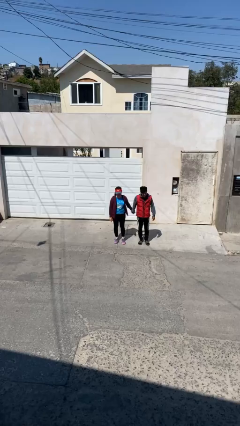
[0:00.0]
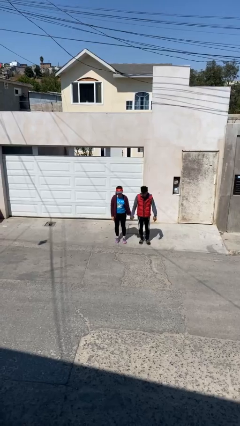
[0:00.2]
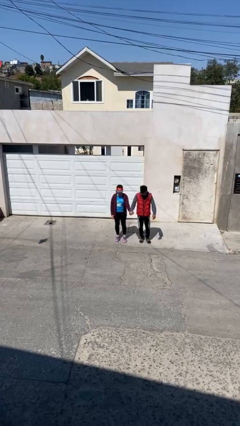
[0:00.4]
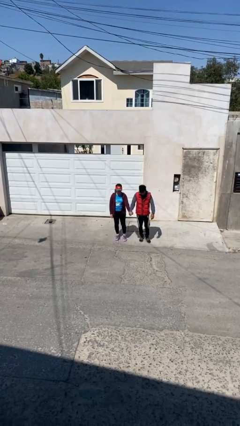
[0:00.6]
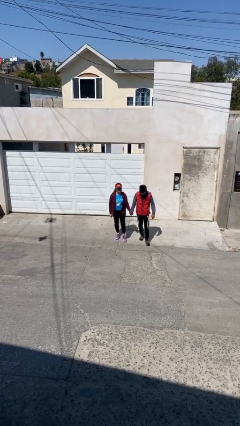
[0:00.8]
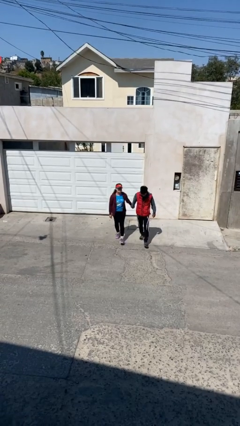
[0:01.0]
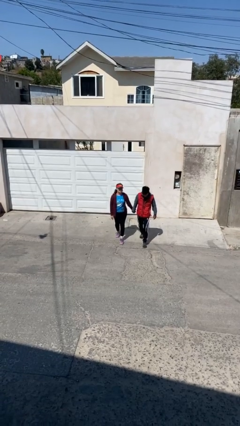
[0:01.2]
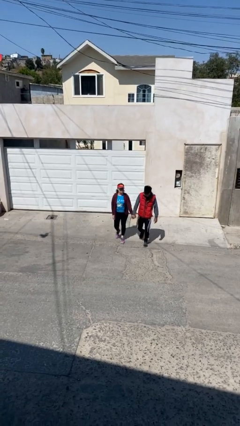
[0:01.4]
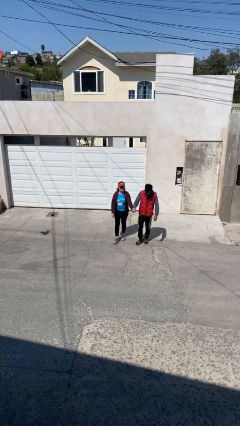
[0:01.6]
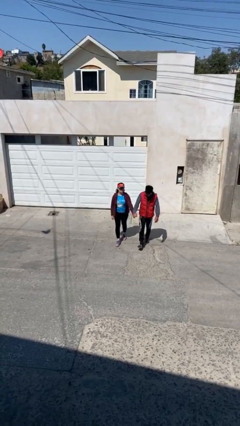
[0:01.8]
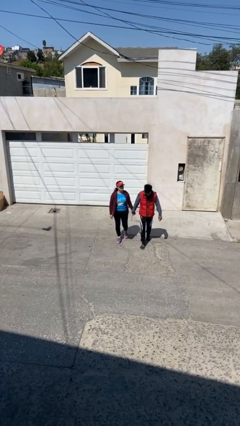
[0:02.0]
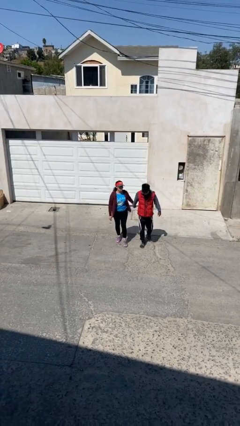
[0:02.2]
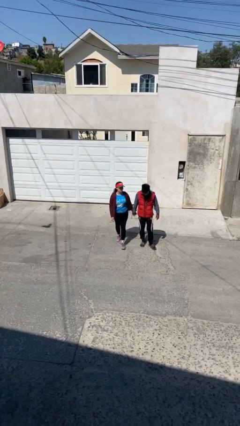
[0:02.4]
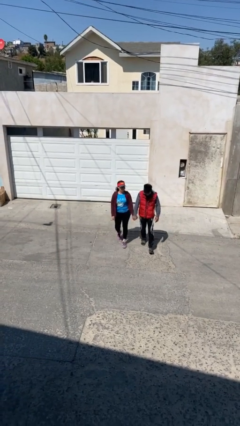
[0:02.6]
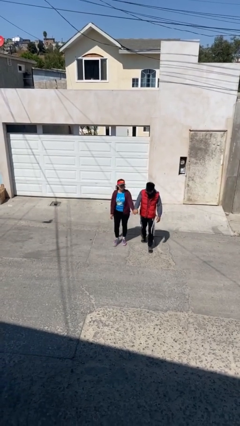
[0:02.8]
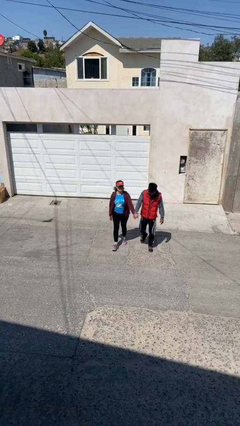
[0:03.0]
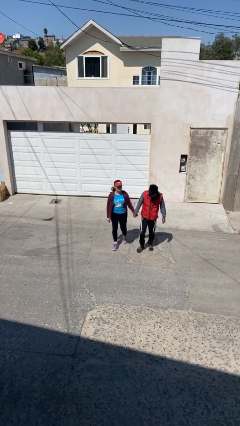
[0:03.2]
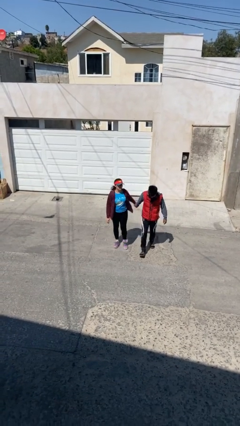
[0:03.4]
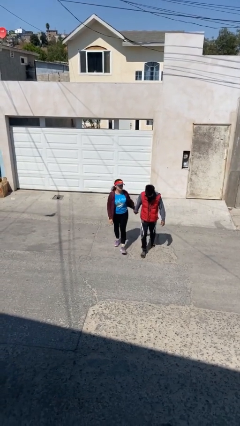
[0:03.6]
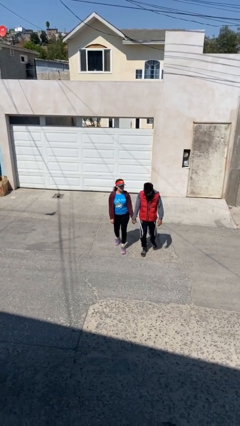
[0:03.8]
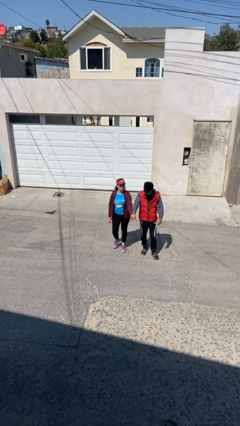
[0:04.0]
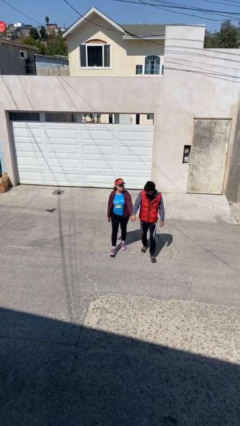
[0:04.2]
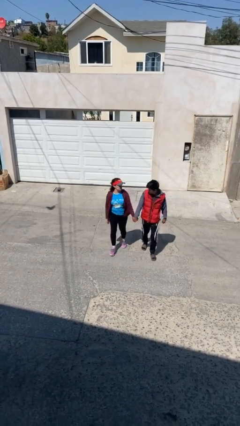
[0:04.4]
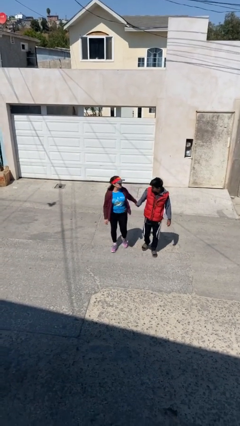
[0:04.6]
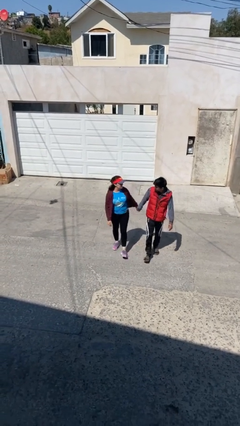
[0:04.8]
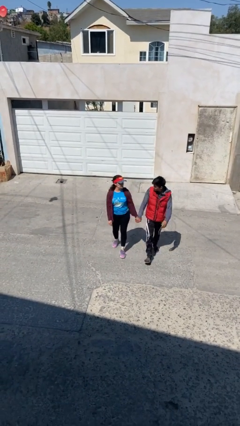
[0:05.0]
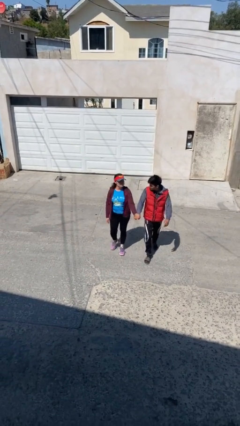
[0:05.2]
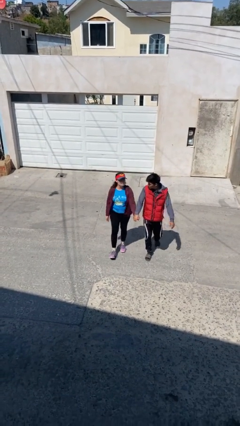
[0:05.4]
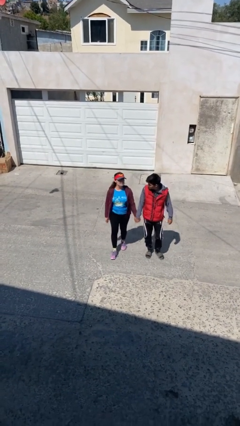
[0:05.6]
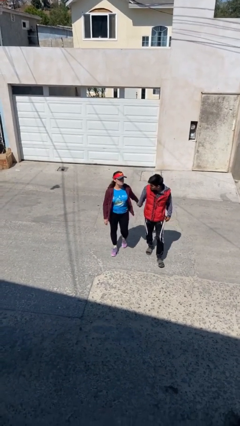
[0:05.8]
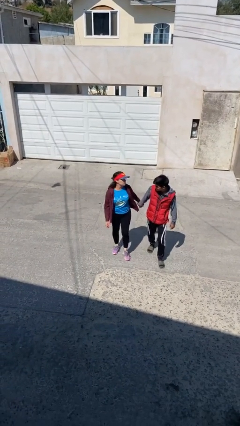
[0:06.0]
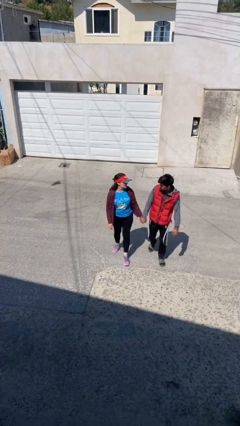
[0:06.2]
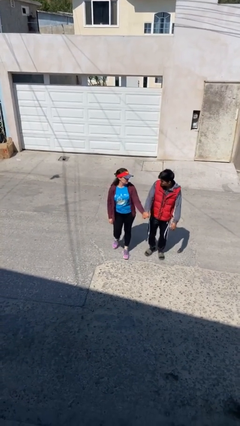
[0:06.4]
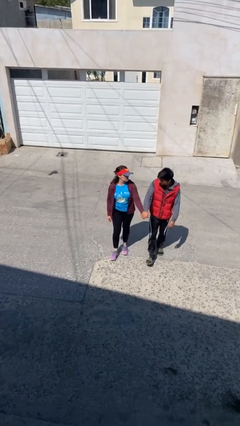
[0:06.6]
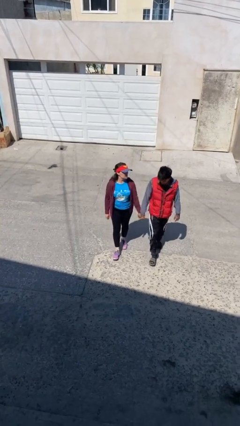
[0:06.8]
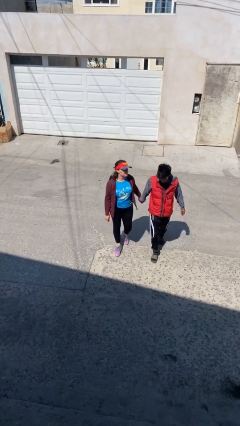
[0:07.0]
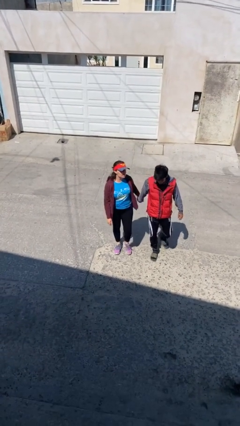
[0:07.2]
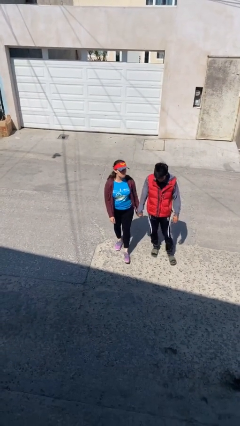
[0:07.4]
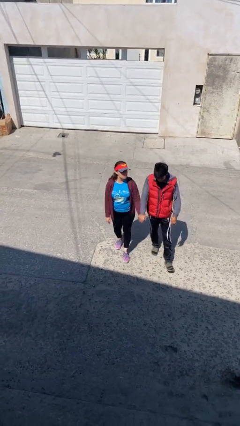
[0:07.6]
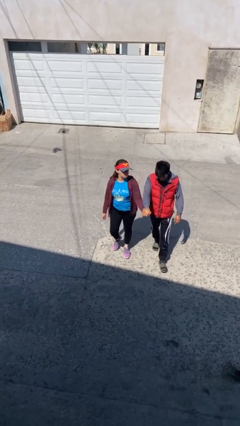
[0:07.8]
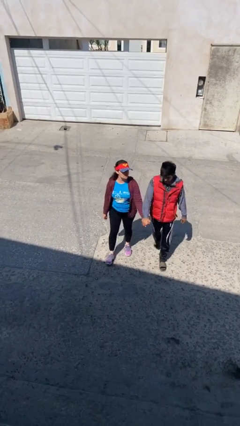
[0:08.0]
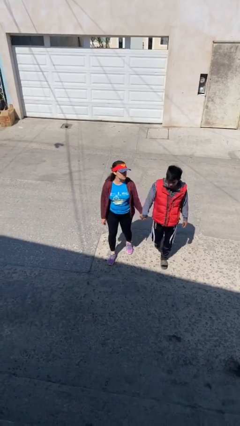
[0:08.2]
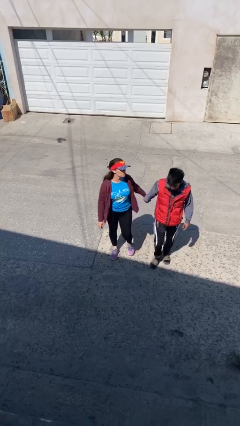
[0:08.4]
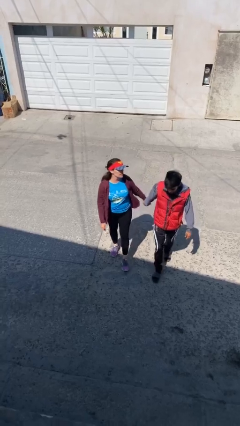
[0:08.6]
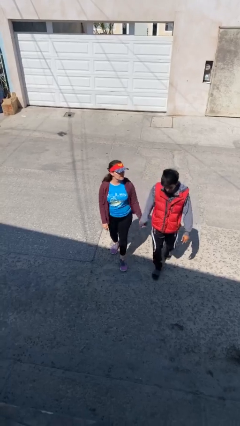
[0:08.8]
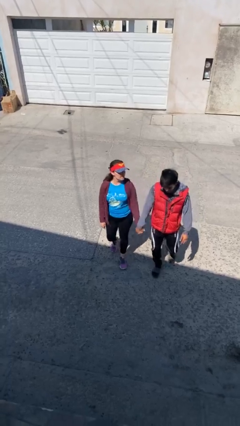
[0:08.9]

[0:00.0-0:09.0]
person holds hand

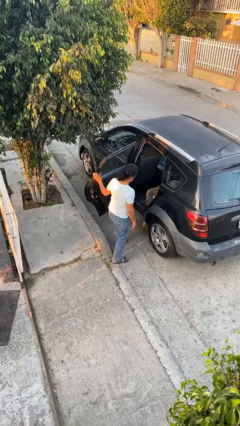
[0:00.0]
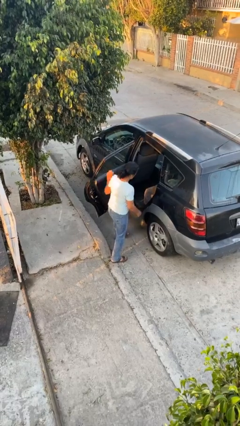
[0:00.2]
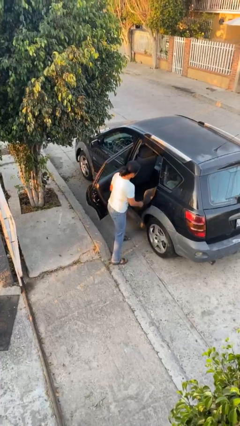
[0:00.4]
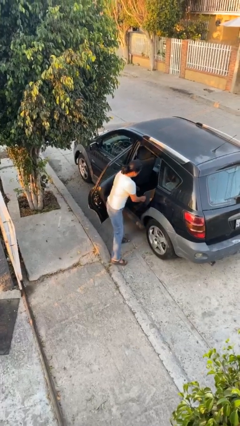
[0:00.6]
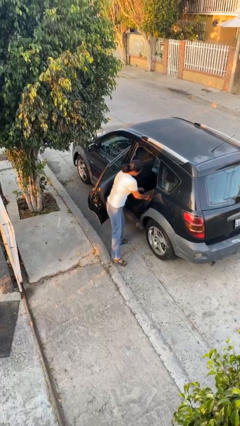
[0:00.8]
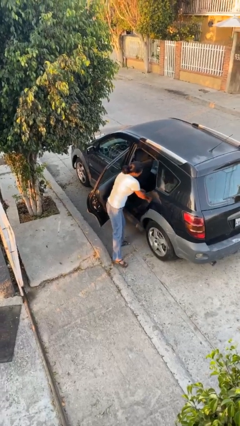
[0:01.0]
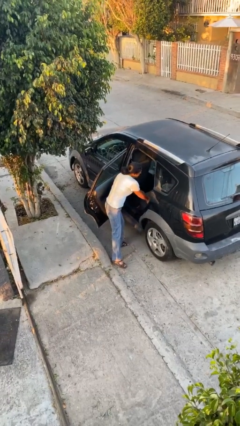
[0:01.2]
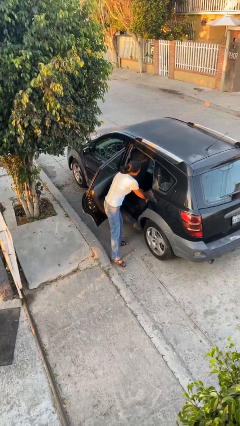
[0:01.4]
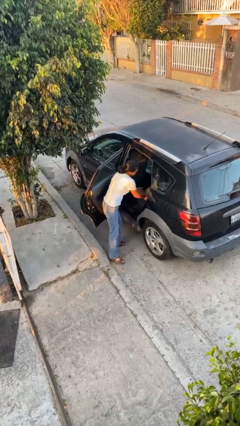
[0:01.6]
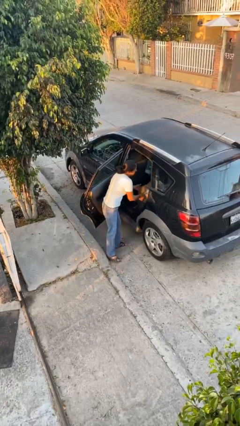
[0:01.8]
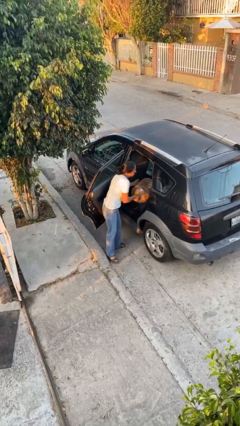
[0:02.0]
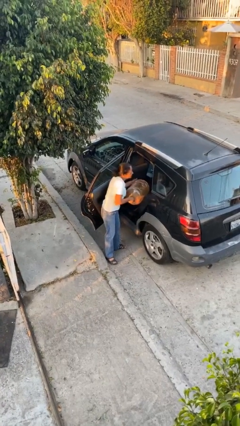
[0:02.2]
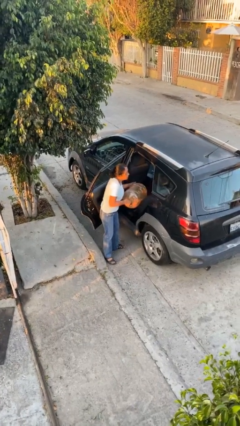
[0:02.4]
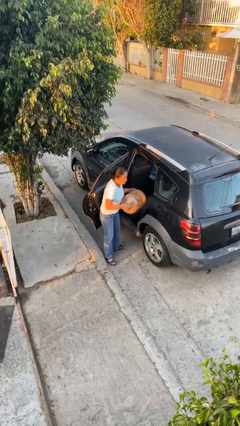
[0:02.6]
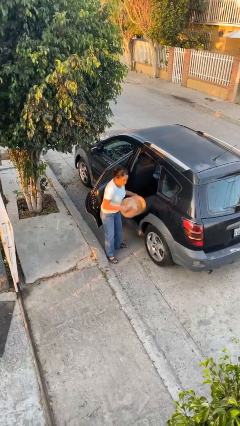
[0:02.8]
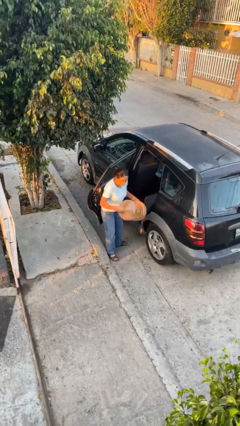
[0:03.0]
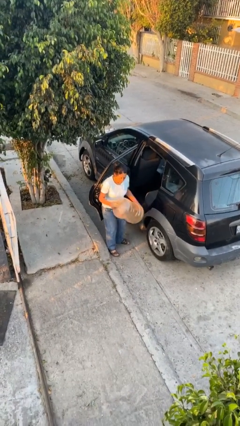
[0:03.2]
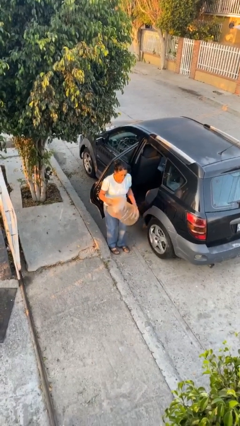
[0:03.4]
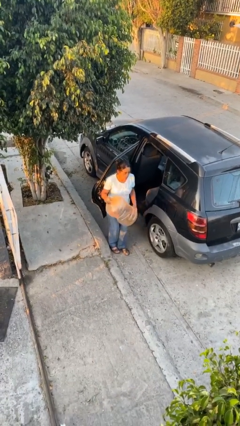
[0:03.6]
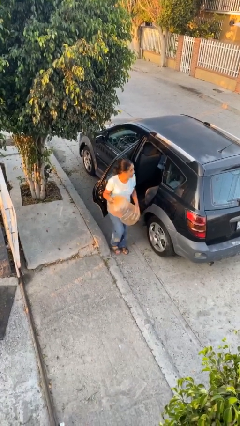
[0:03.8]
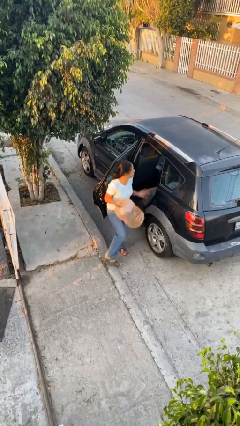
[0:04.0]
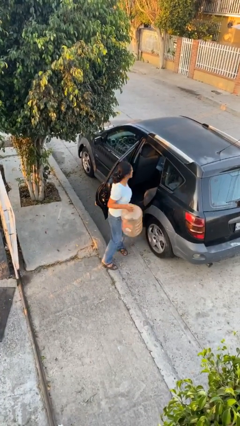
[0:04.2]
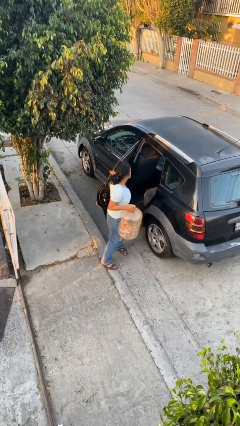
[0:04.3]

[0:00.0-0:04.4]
person unloads car

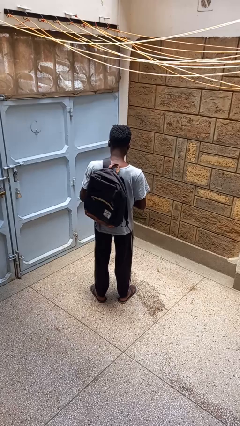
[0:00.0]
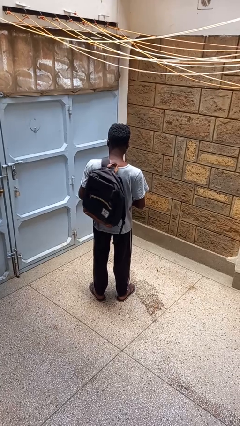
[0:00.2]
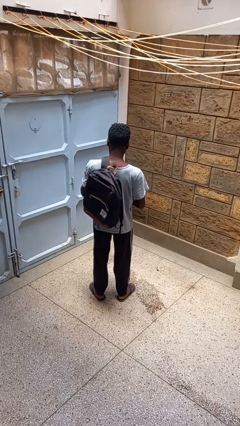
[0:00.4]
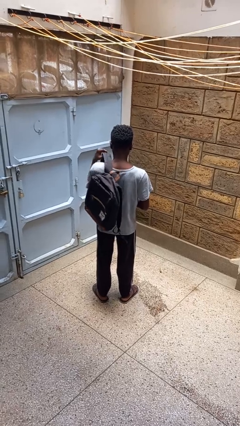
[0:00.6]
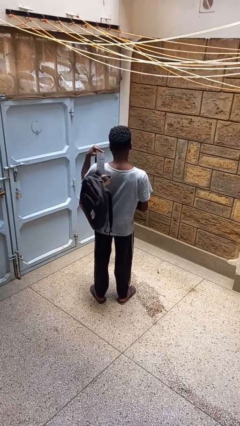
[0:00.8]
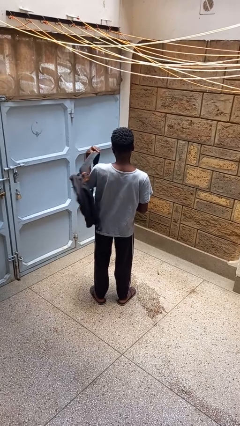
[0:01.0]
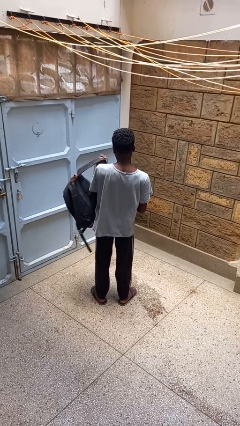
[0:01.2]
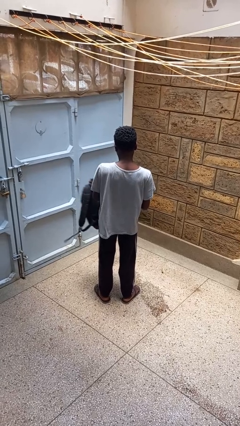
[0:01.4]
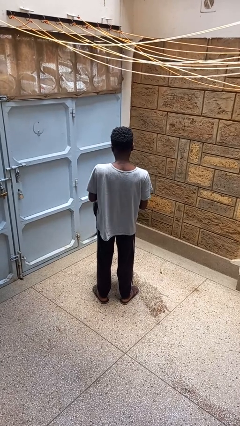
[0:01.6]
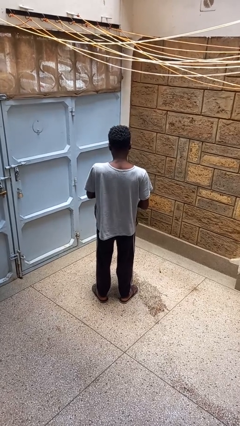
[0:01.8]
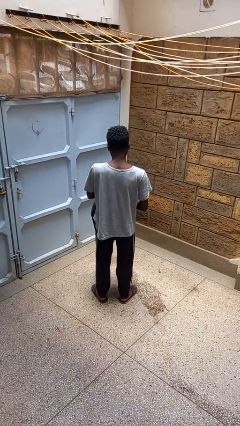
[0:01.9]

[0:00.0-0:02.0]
person takes off backpack

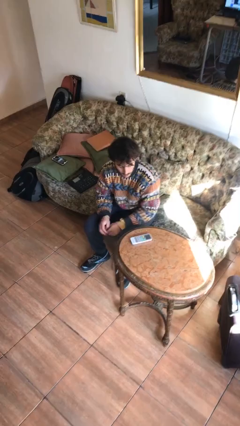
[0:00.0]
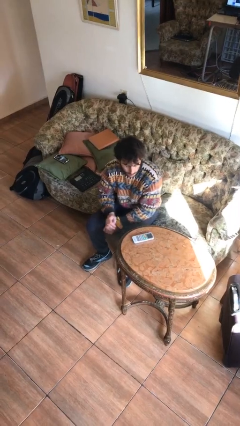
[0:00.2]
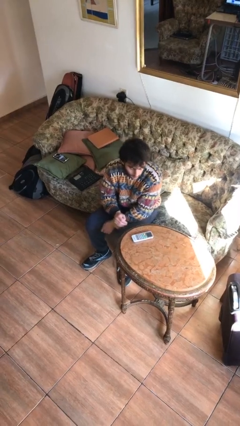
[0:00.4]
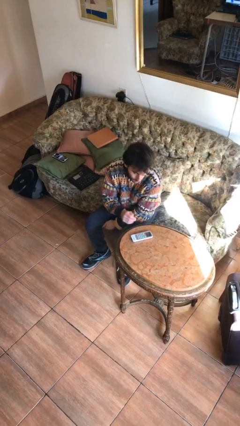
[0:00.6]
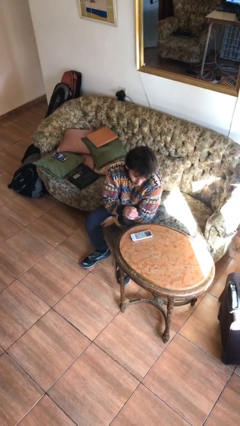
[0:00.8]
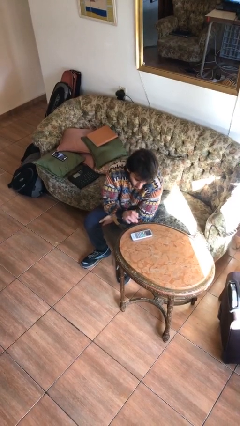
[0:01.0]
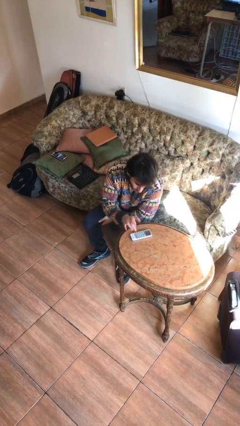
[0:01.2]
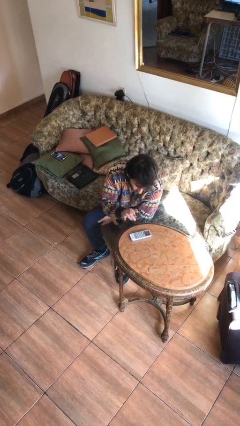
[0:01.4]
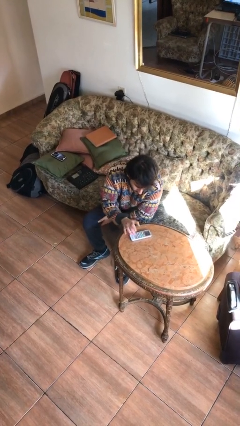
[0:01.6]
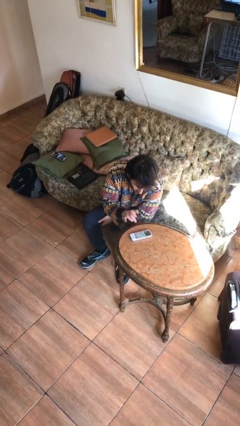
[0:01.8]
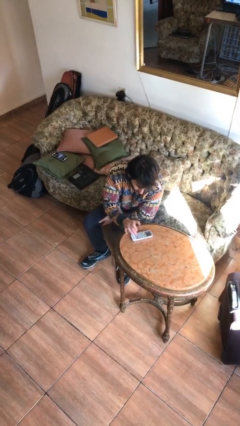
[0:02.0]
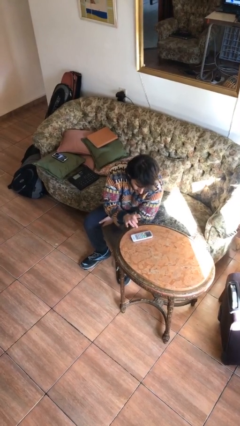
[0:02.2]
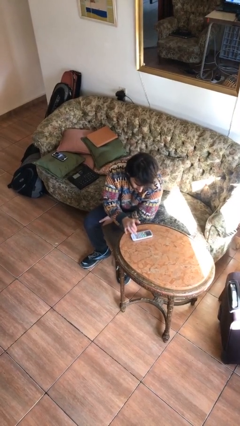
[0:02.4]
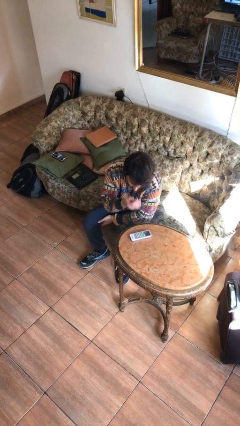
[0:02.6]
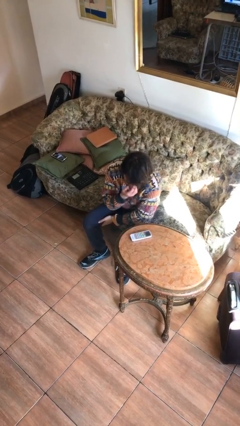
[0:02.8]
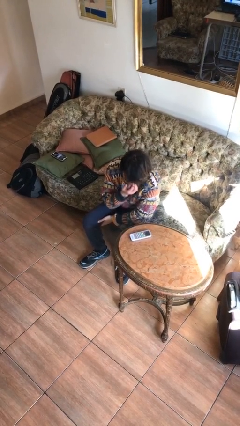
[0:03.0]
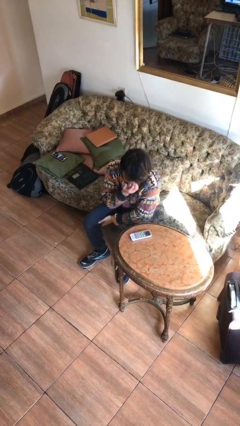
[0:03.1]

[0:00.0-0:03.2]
person taps object with finger
